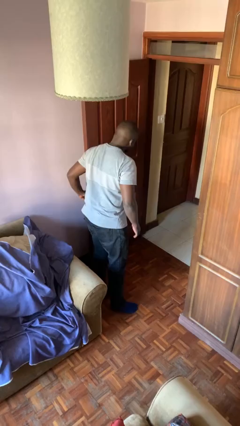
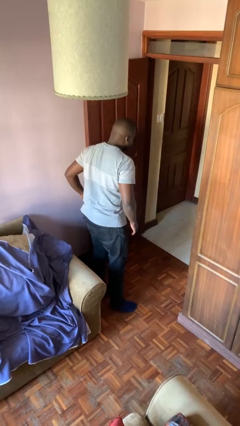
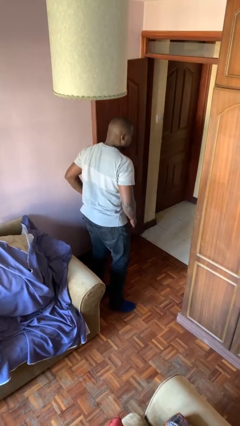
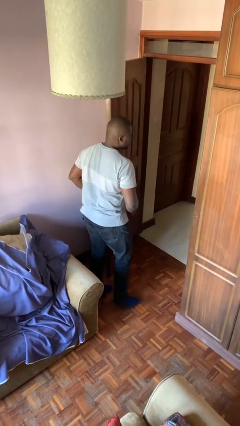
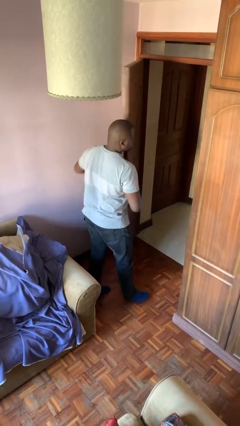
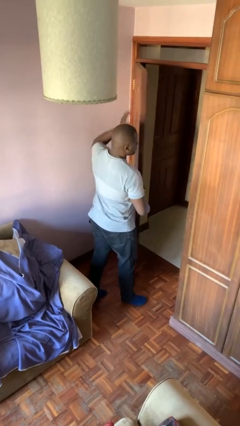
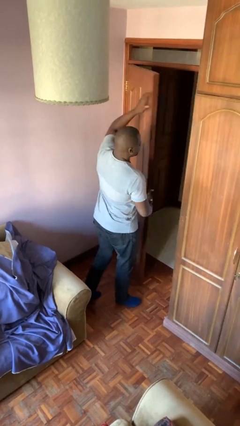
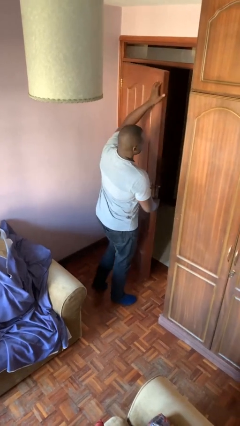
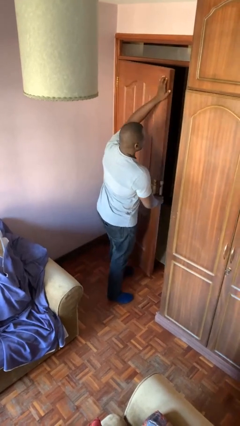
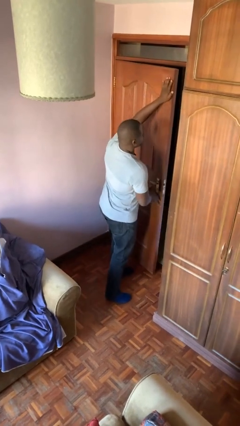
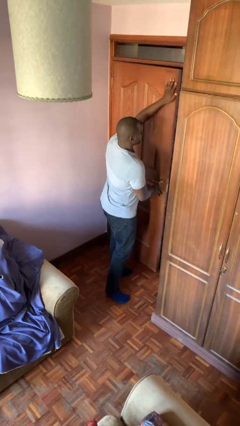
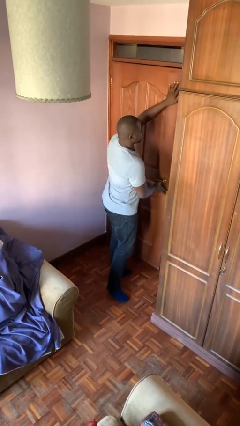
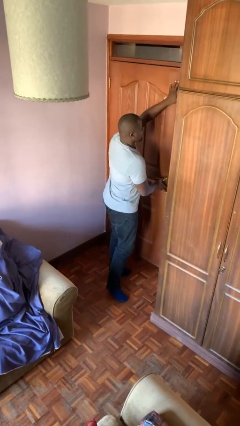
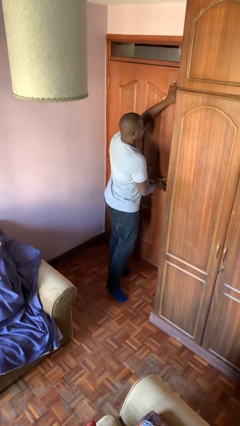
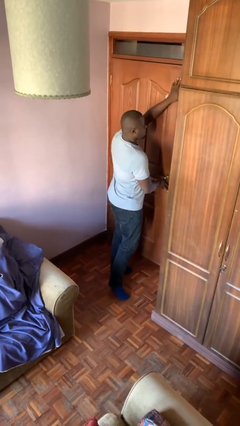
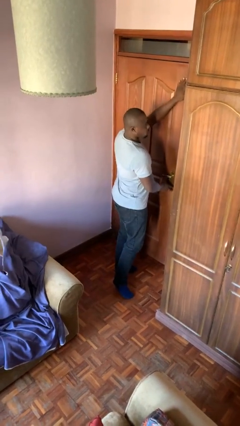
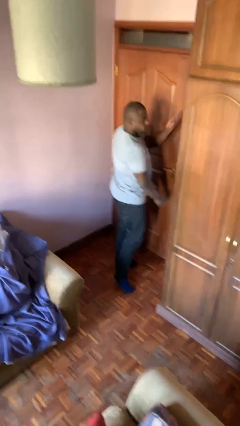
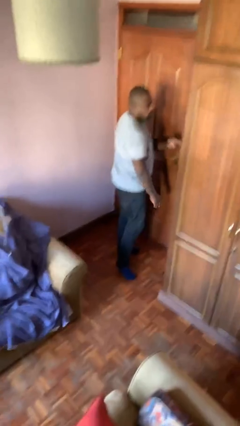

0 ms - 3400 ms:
person closes facility door

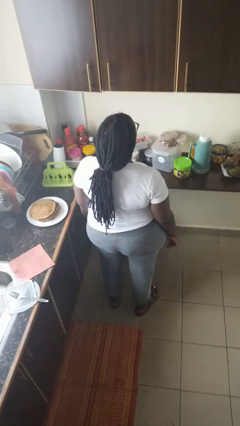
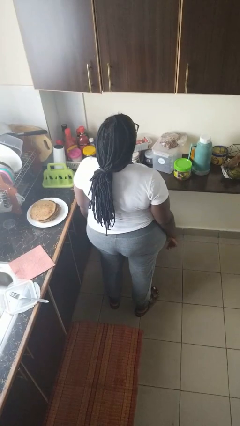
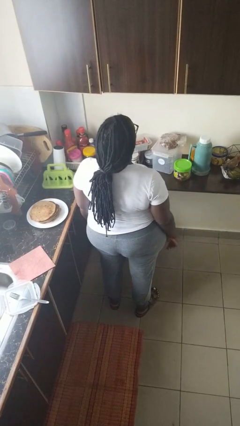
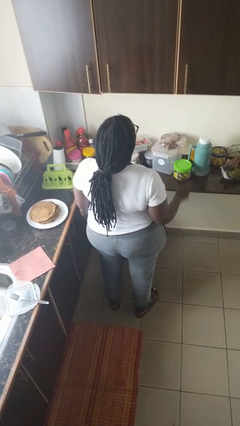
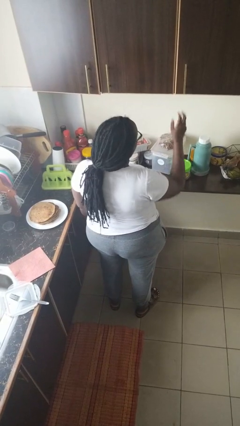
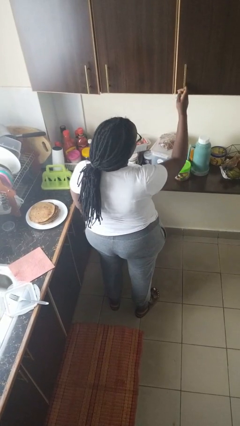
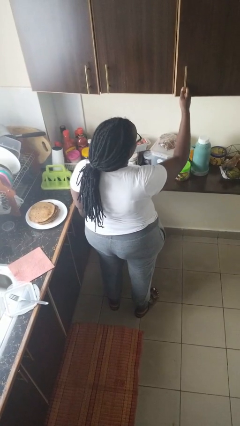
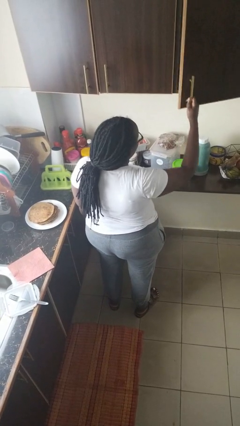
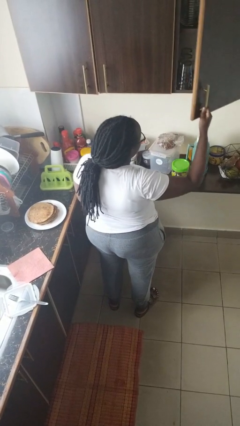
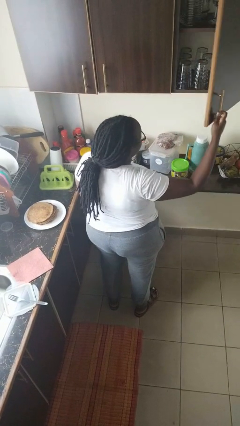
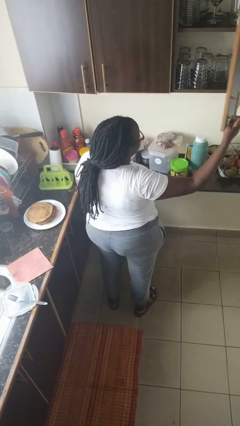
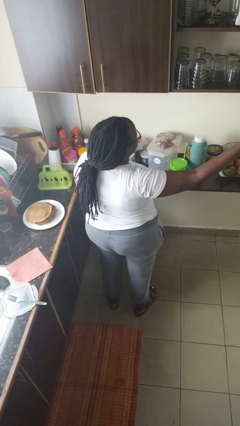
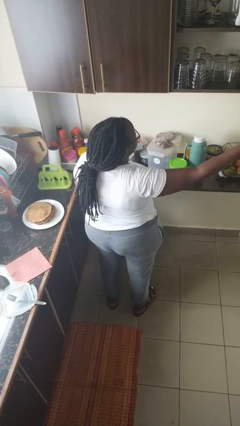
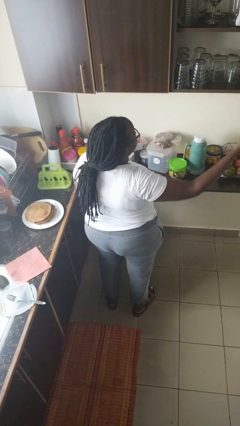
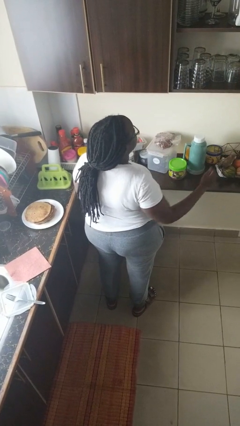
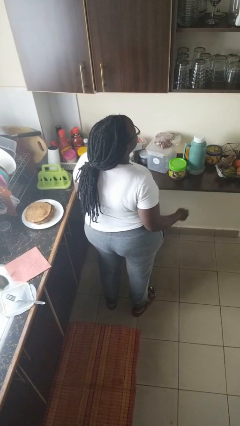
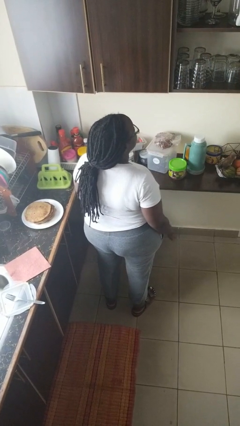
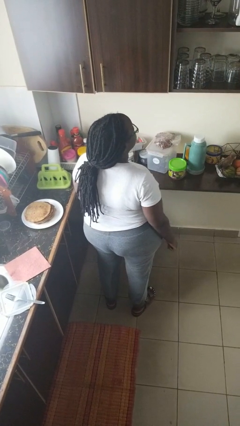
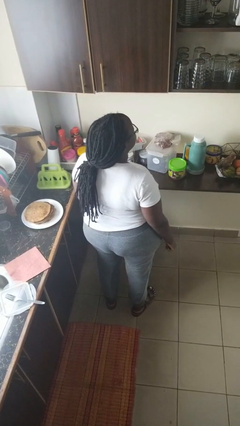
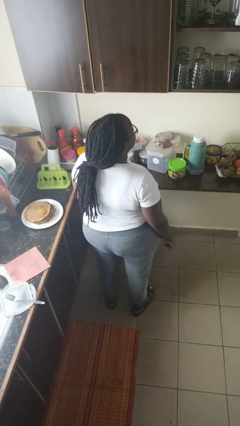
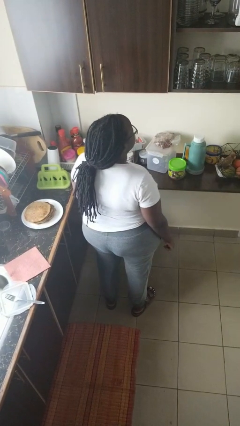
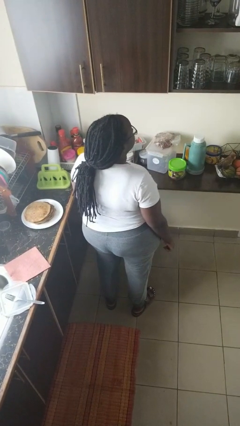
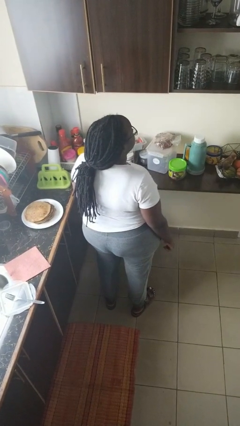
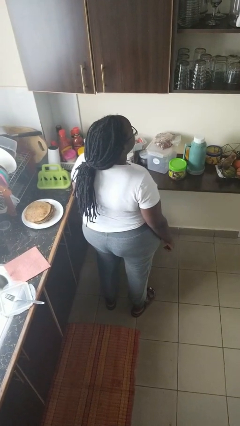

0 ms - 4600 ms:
person opens cabinet

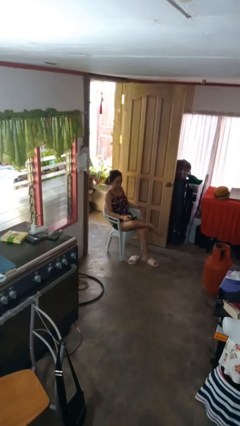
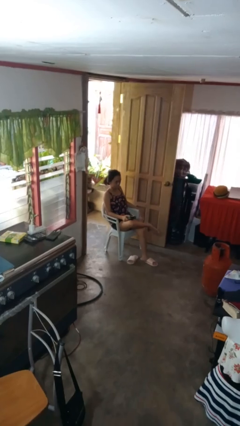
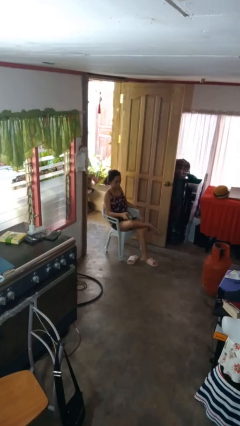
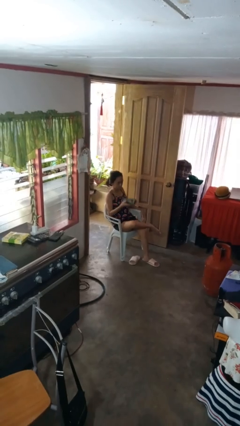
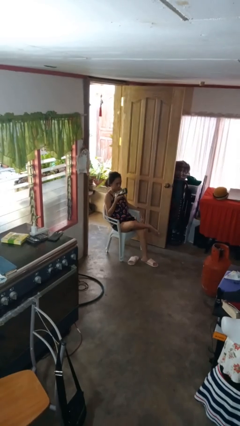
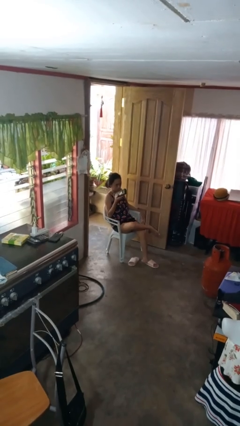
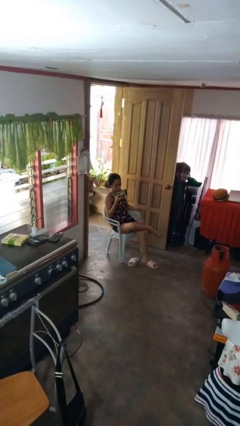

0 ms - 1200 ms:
person uses television remote

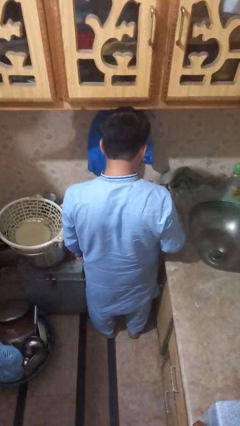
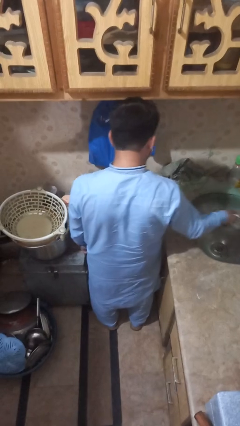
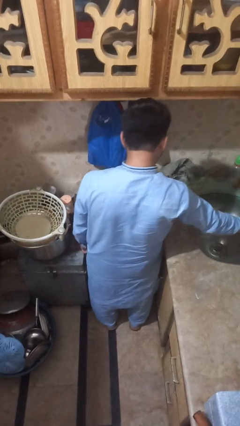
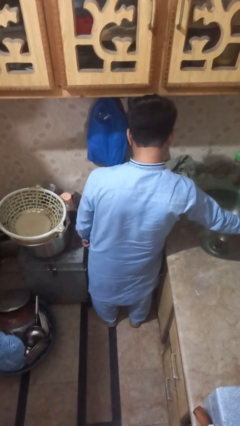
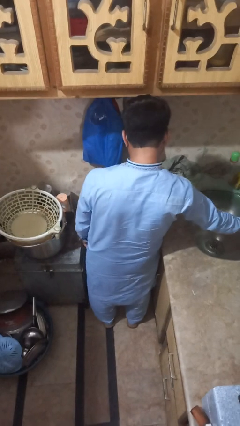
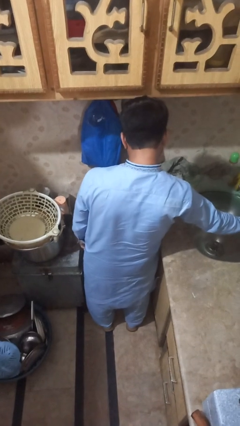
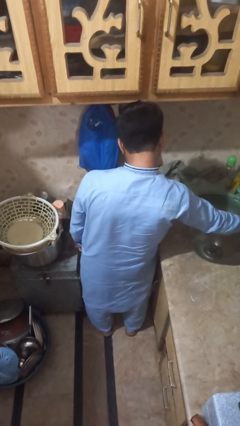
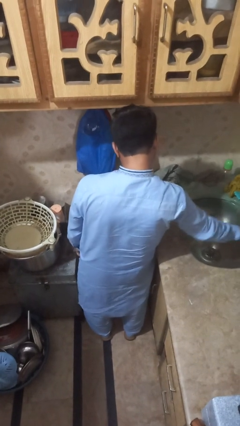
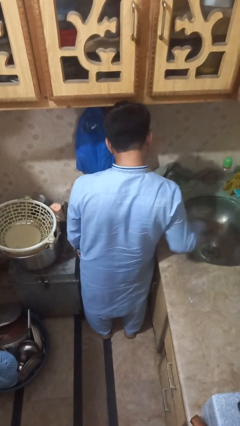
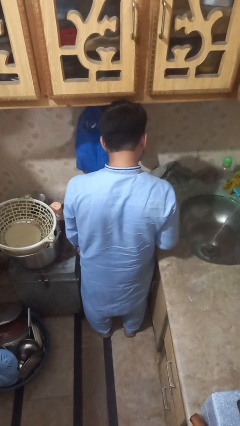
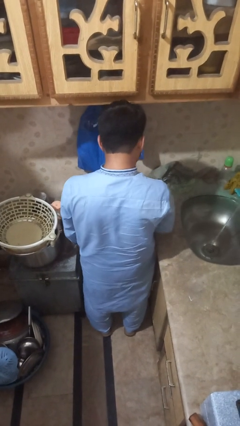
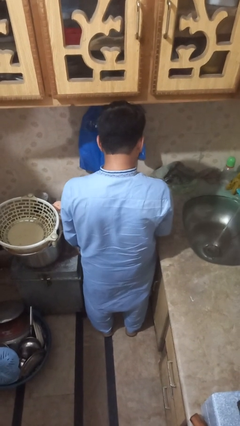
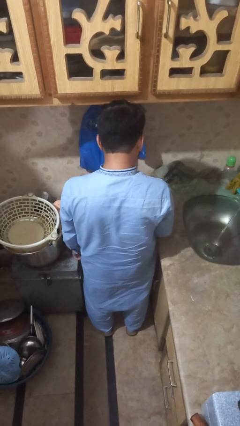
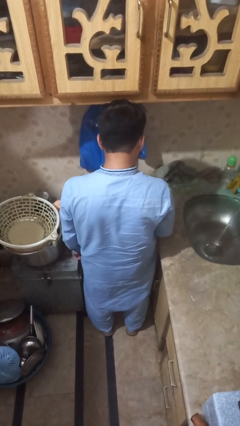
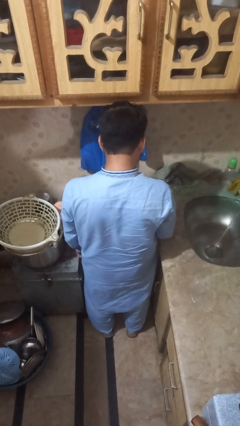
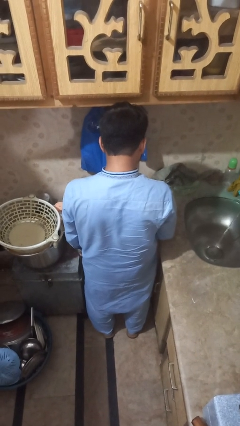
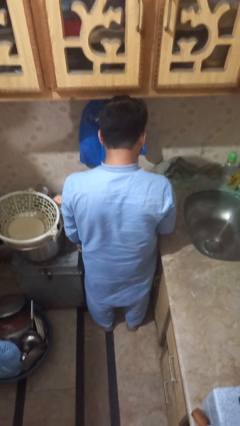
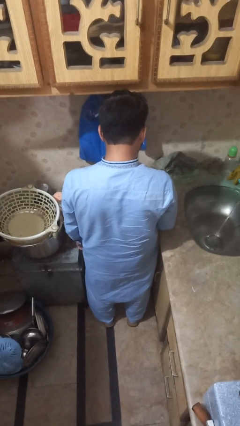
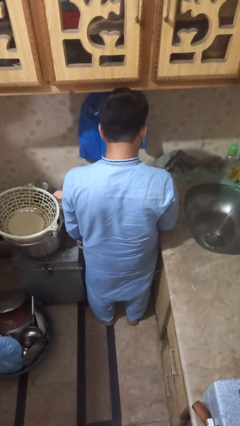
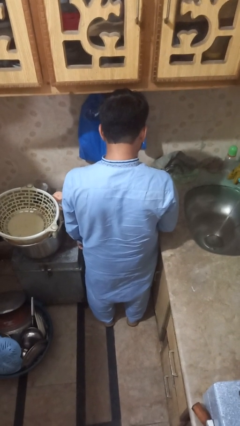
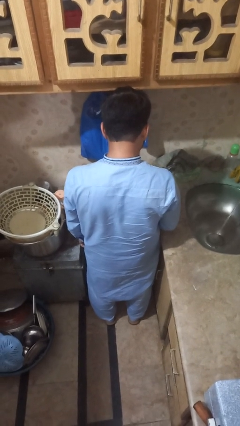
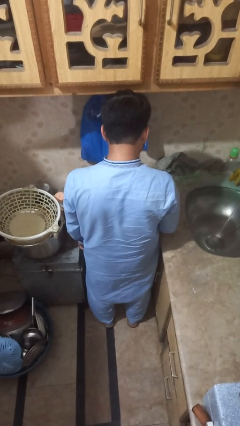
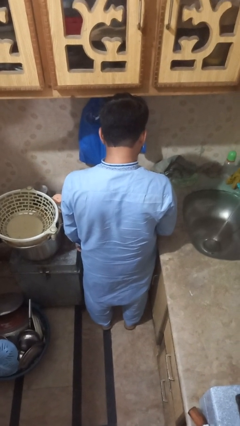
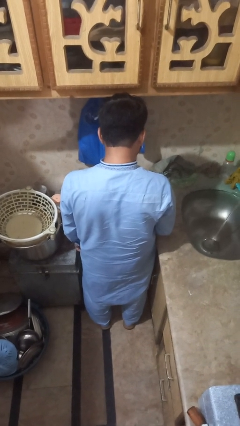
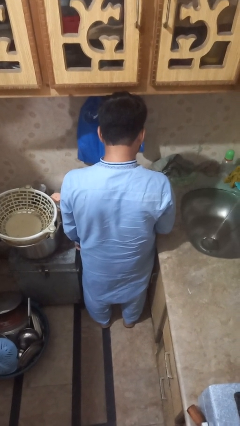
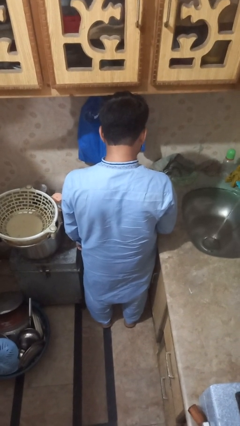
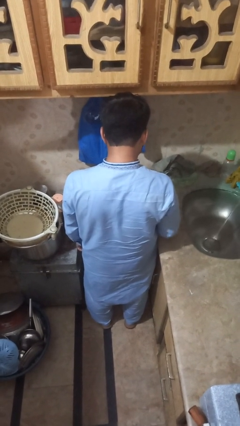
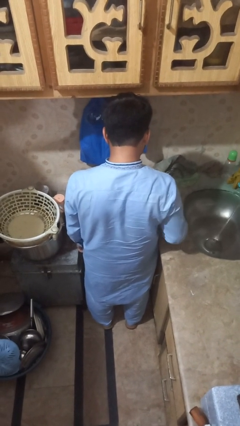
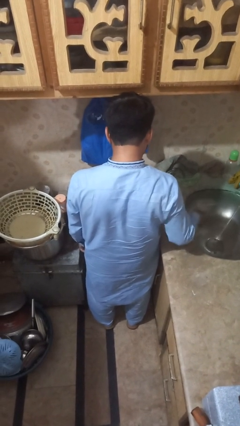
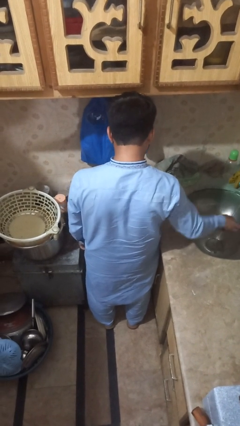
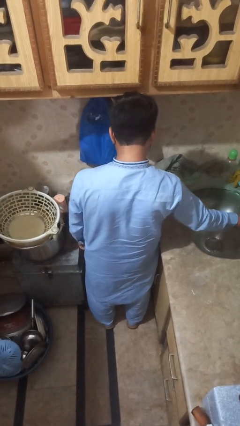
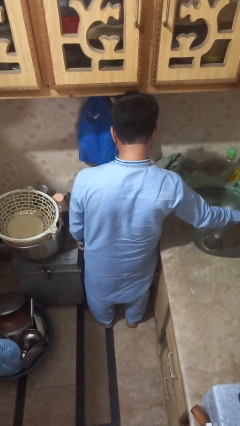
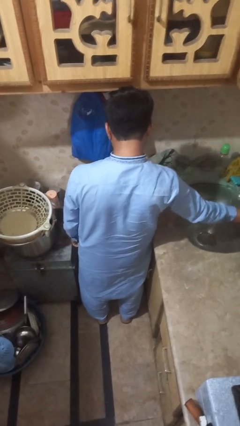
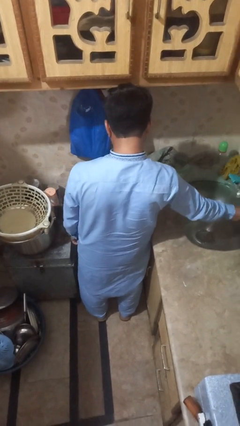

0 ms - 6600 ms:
person turns on faucet

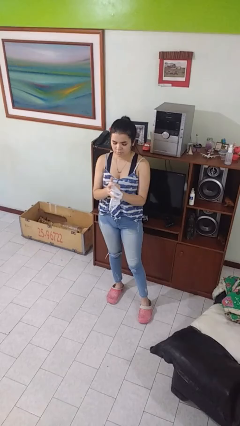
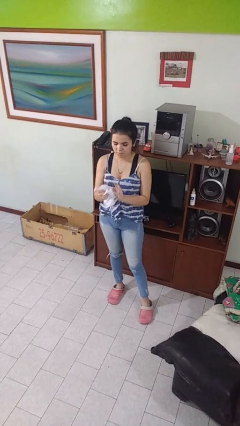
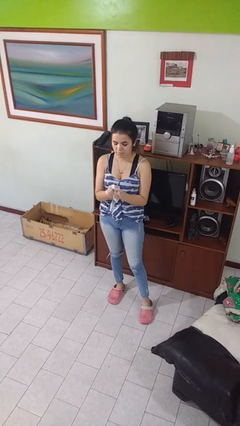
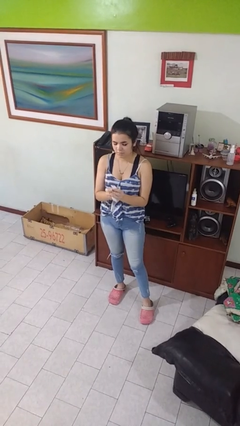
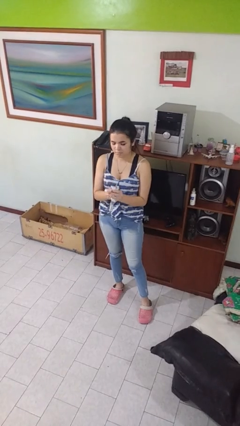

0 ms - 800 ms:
person crumples paper

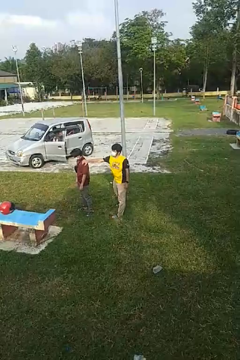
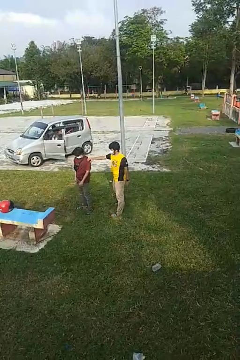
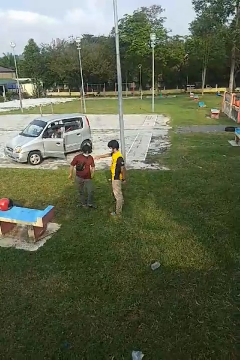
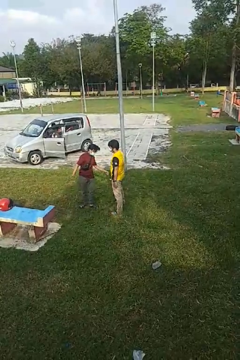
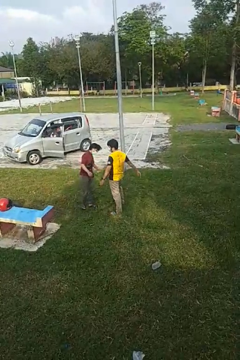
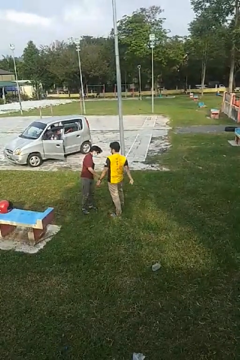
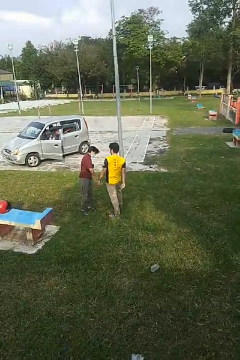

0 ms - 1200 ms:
person spins person around

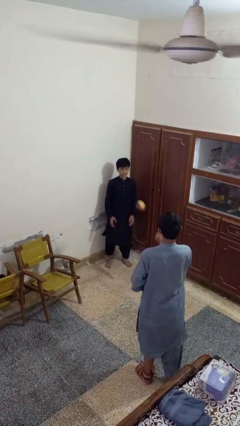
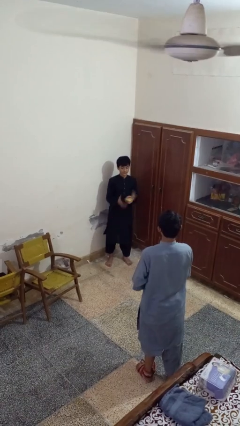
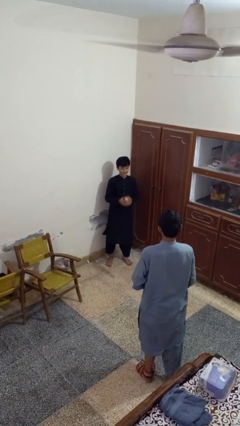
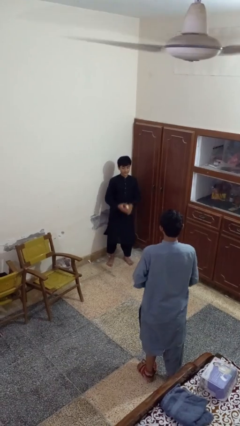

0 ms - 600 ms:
person catches object from person
